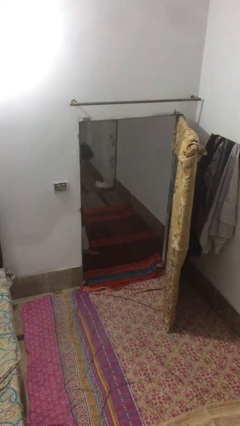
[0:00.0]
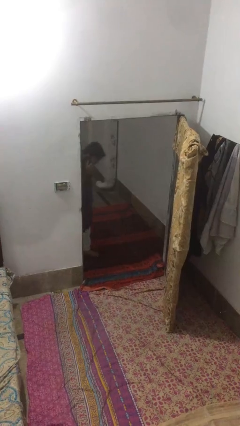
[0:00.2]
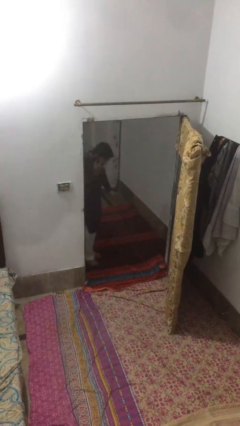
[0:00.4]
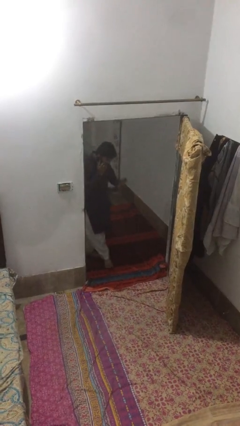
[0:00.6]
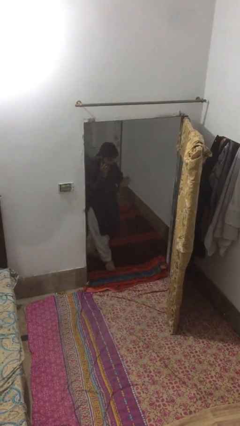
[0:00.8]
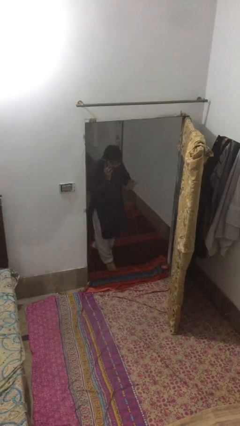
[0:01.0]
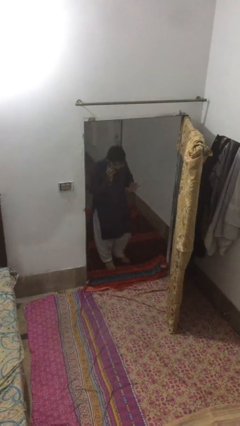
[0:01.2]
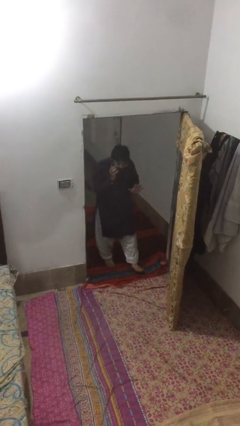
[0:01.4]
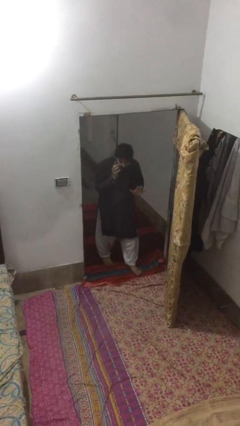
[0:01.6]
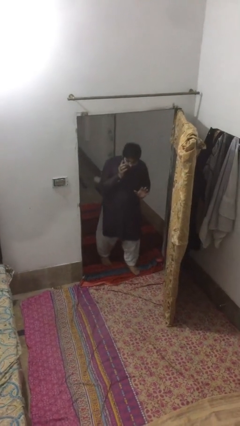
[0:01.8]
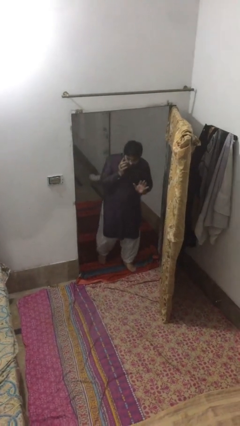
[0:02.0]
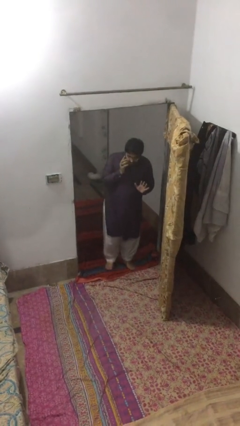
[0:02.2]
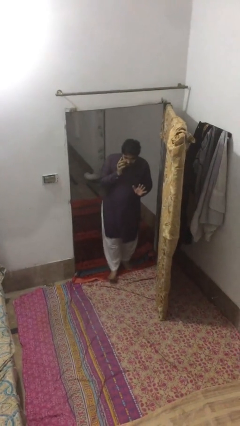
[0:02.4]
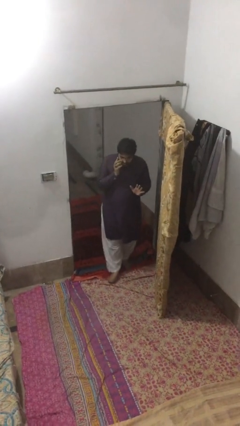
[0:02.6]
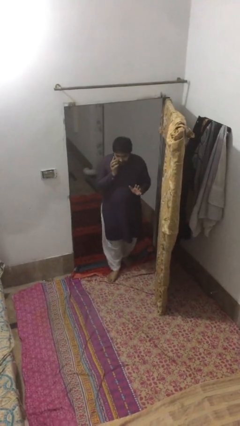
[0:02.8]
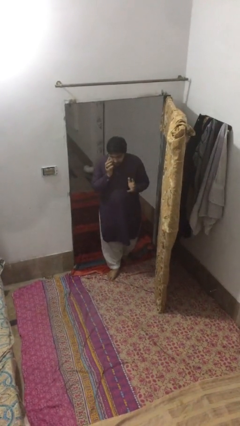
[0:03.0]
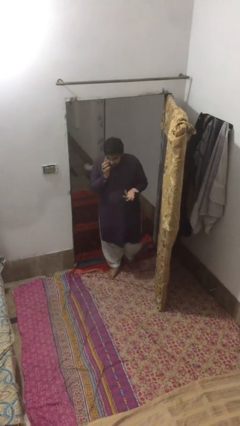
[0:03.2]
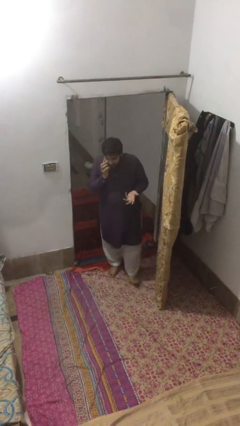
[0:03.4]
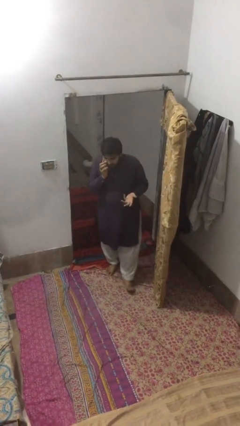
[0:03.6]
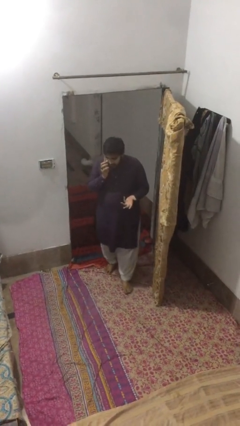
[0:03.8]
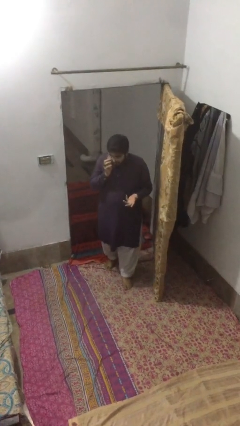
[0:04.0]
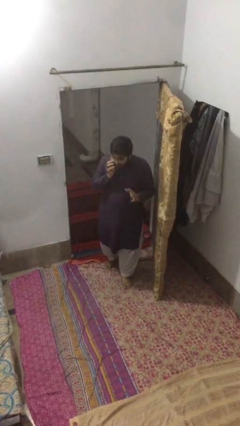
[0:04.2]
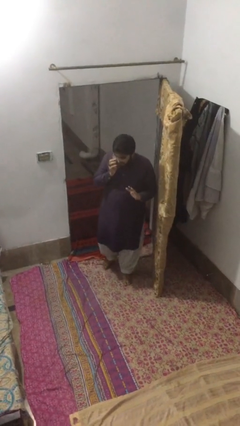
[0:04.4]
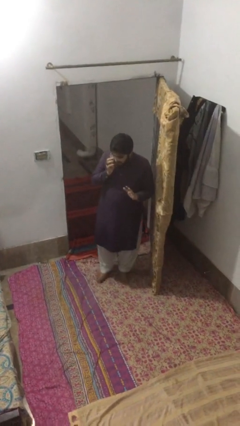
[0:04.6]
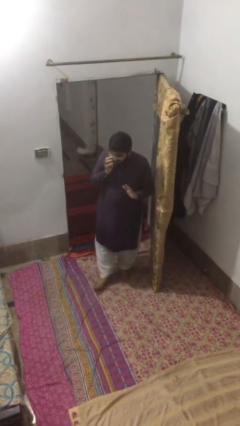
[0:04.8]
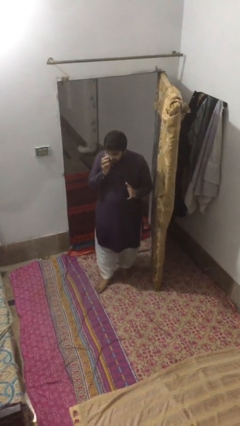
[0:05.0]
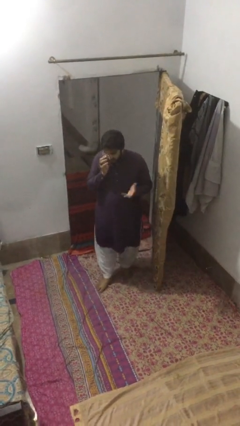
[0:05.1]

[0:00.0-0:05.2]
person enters scene through structure

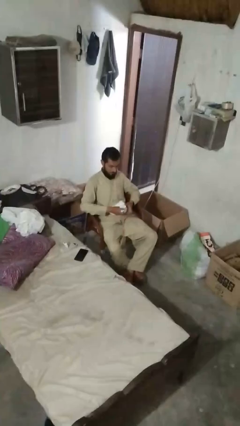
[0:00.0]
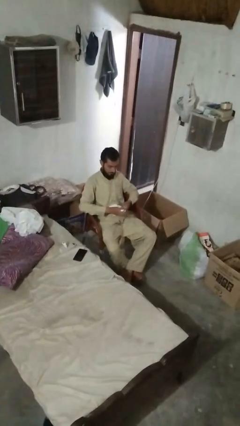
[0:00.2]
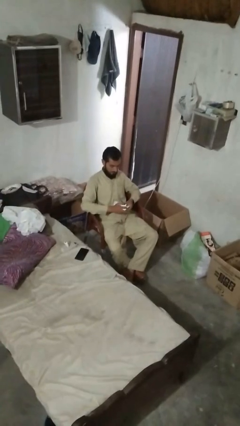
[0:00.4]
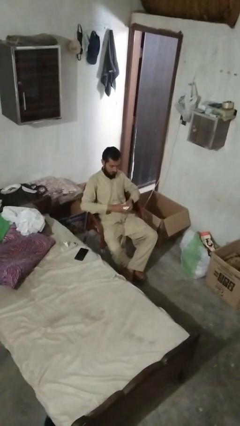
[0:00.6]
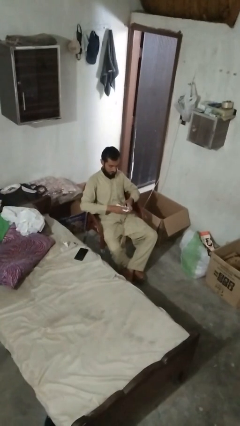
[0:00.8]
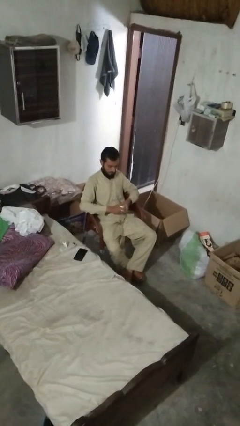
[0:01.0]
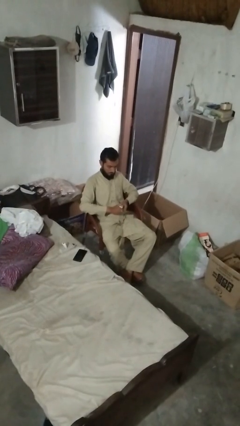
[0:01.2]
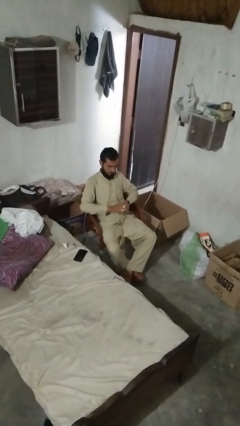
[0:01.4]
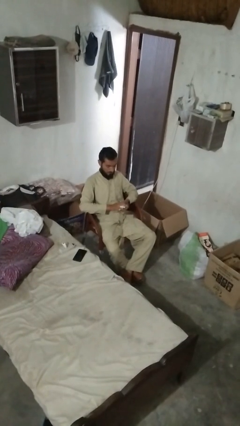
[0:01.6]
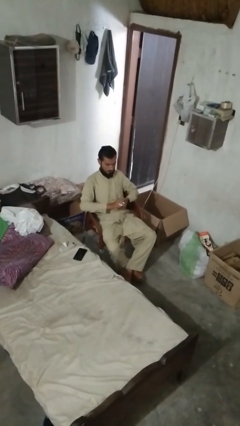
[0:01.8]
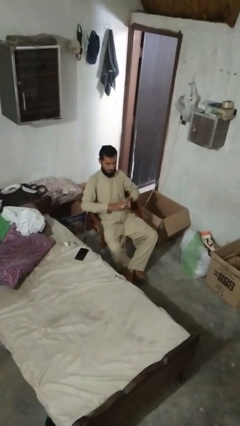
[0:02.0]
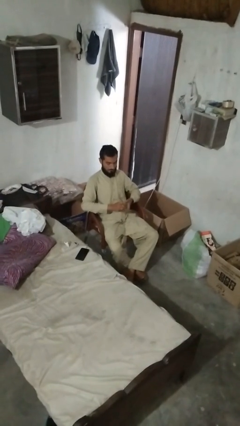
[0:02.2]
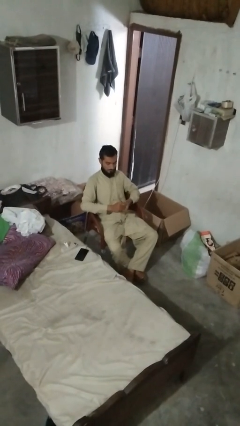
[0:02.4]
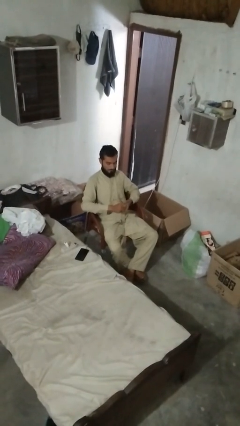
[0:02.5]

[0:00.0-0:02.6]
person crumples paper

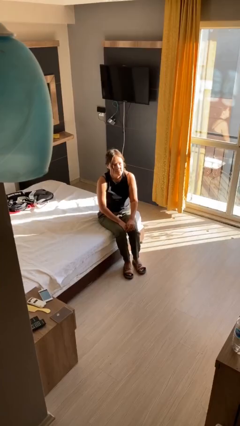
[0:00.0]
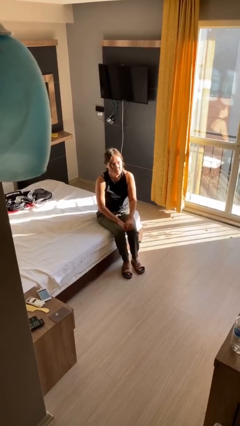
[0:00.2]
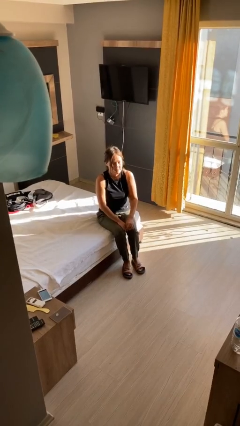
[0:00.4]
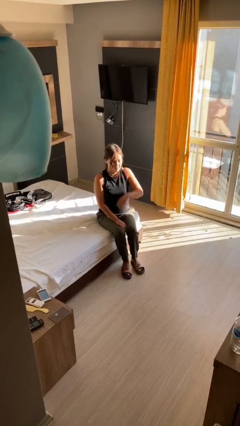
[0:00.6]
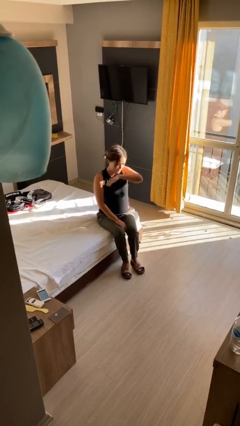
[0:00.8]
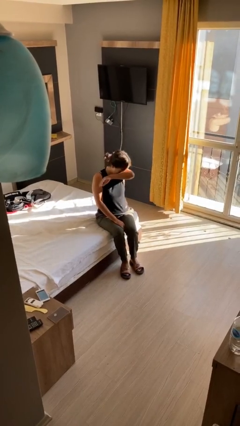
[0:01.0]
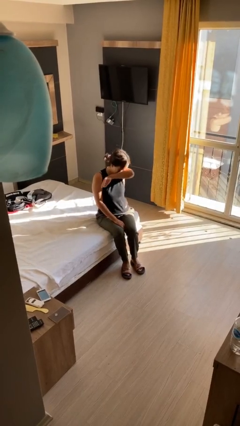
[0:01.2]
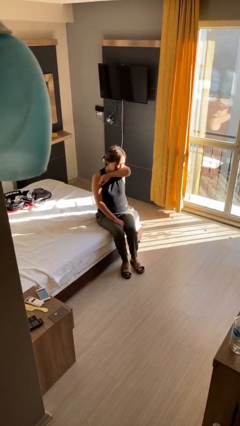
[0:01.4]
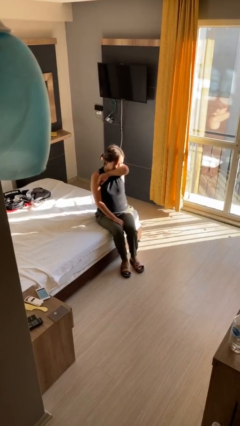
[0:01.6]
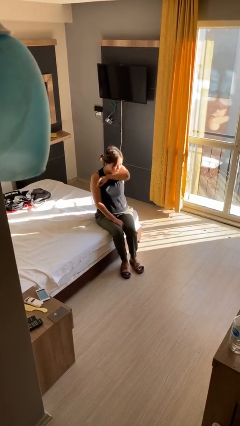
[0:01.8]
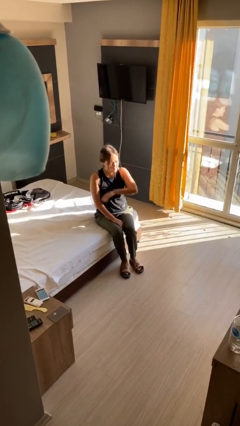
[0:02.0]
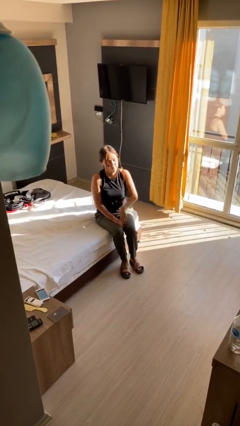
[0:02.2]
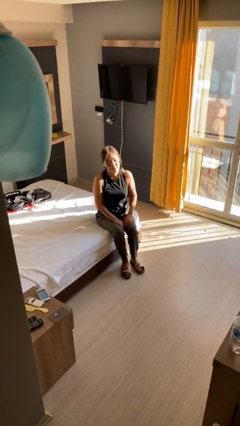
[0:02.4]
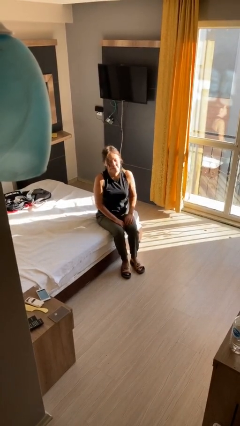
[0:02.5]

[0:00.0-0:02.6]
person sneezes into hand

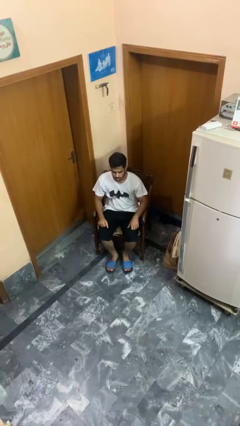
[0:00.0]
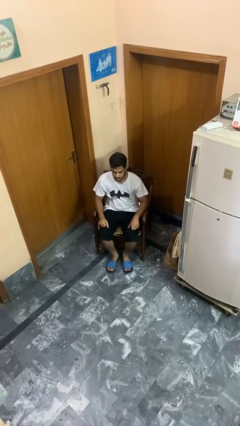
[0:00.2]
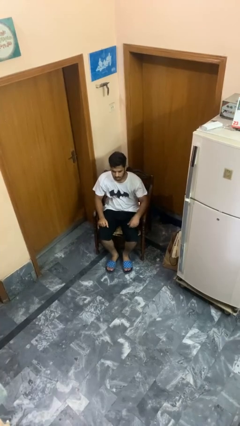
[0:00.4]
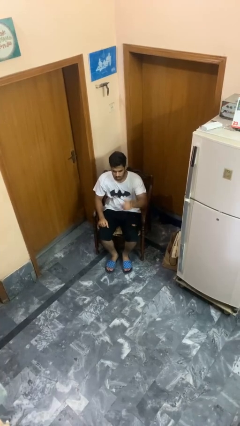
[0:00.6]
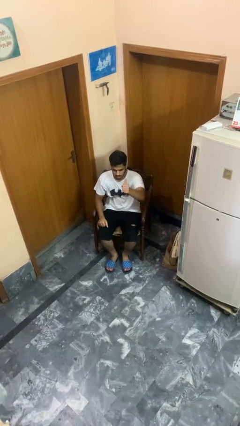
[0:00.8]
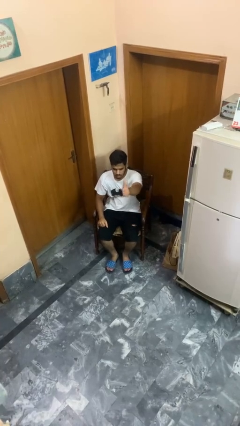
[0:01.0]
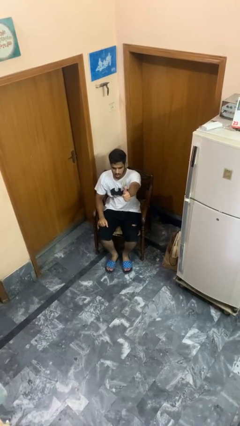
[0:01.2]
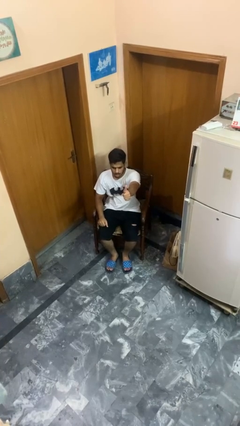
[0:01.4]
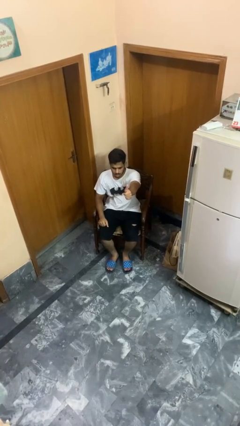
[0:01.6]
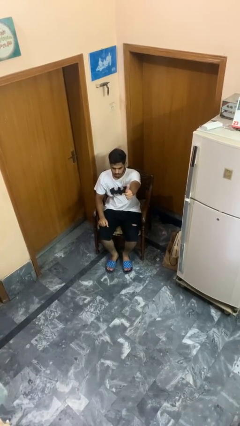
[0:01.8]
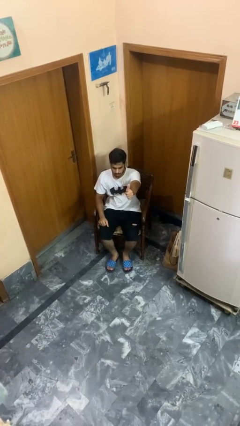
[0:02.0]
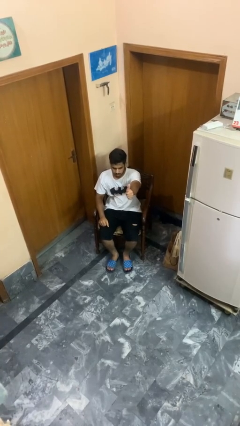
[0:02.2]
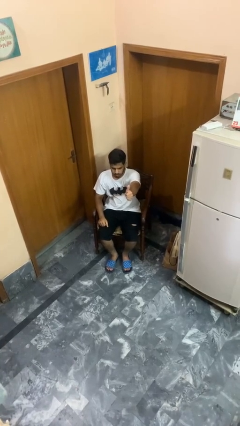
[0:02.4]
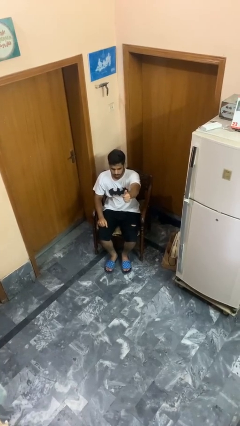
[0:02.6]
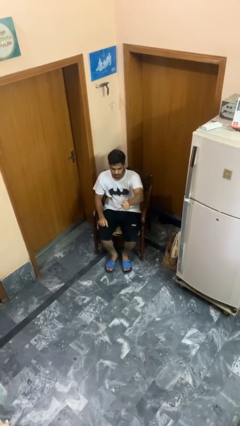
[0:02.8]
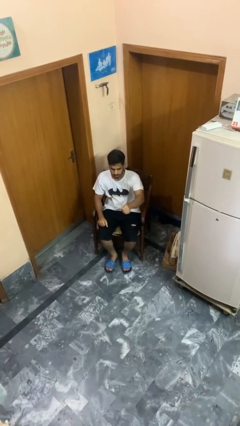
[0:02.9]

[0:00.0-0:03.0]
person gestures thumbs up

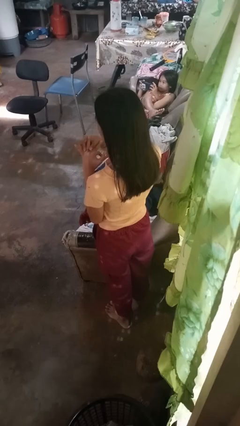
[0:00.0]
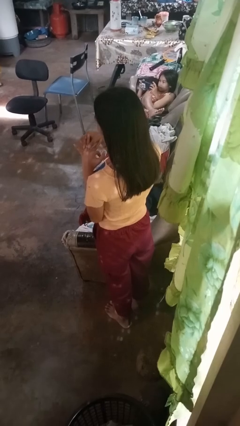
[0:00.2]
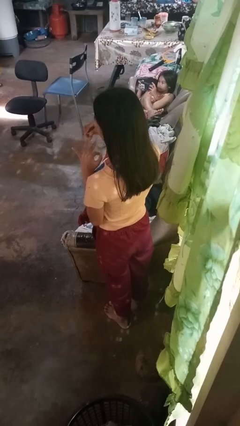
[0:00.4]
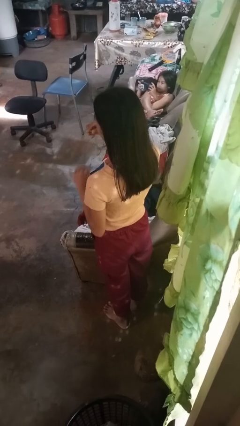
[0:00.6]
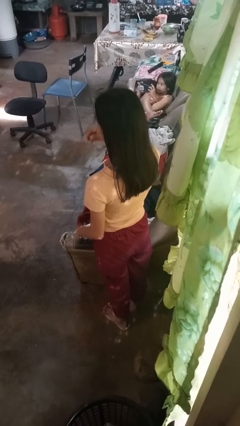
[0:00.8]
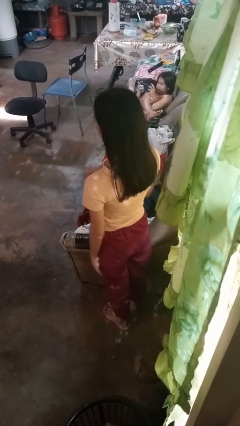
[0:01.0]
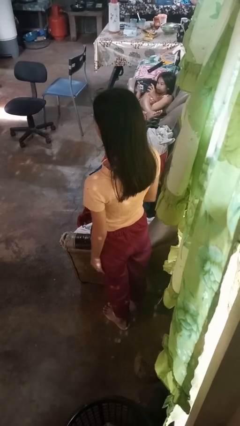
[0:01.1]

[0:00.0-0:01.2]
person takes off ring

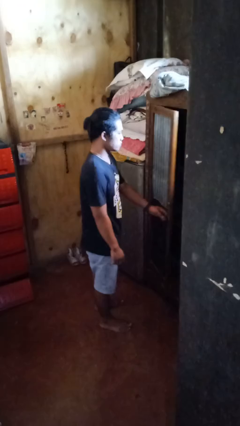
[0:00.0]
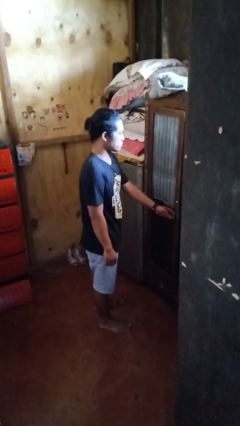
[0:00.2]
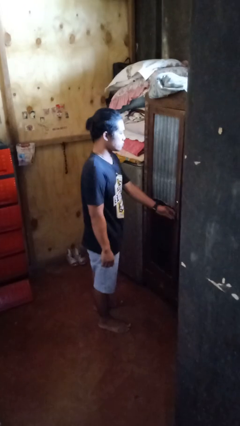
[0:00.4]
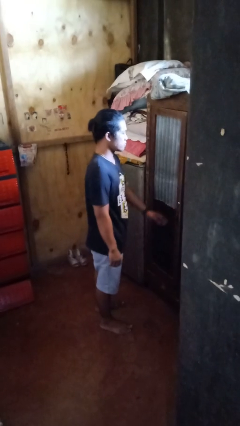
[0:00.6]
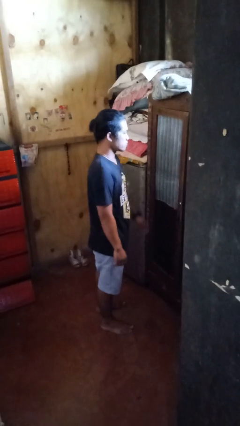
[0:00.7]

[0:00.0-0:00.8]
person closes closet door

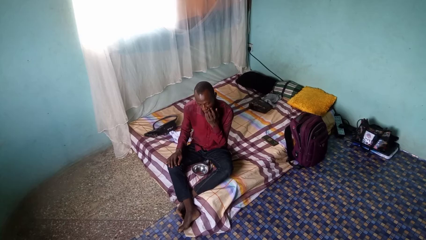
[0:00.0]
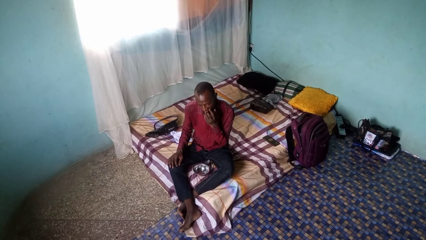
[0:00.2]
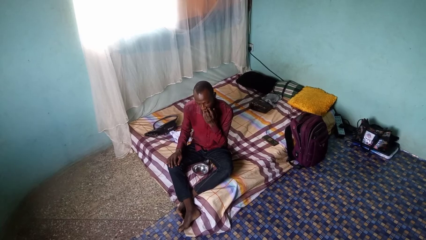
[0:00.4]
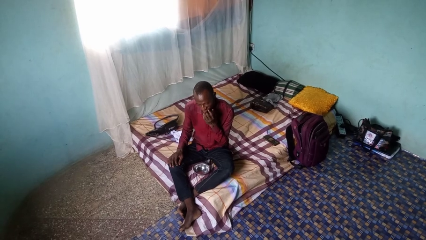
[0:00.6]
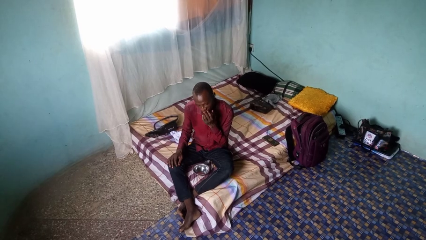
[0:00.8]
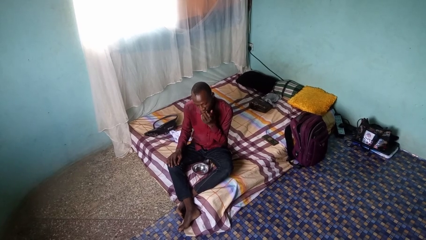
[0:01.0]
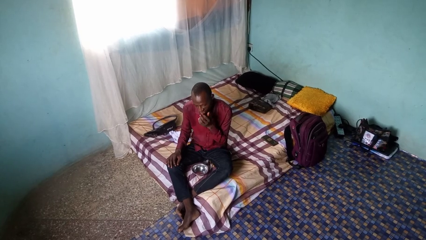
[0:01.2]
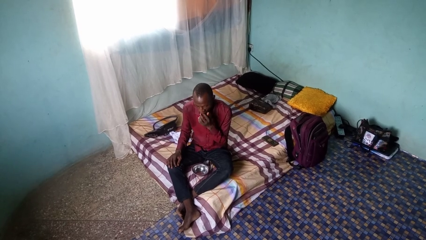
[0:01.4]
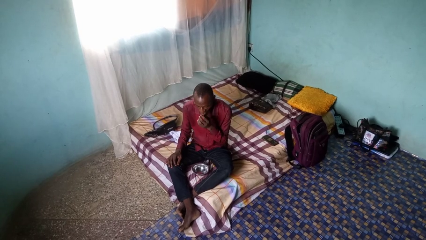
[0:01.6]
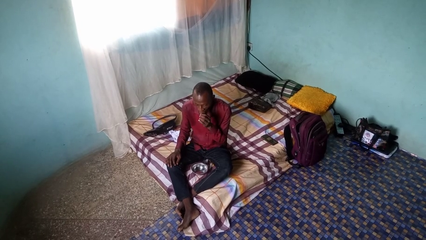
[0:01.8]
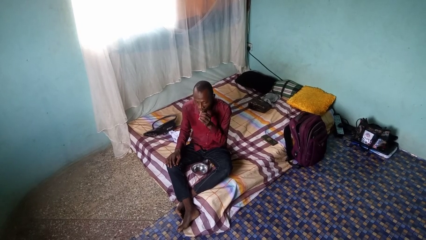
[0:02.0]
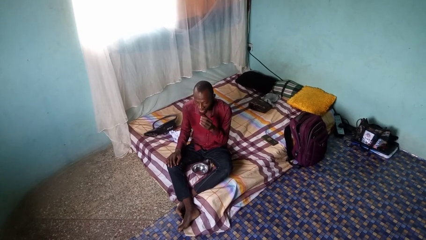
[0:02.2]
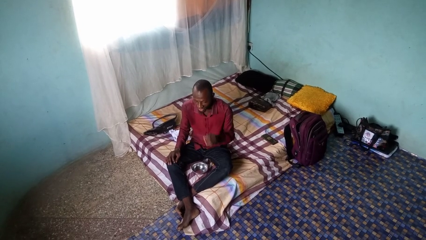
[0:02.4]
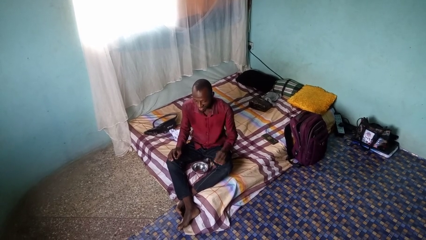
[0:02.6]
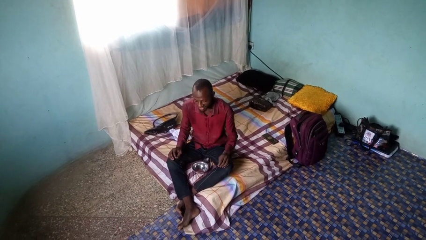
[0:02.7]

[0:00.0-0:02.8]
person licks fingers
